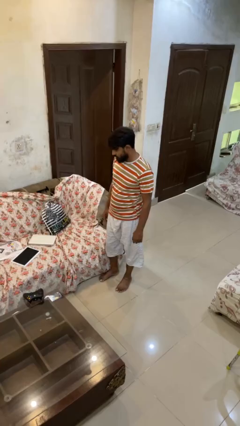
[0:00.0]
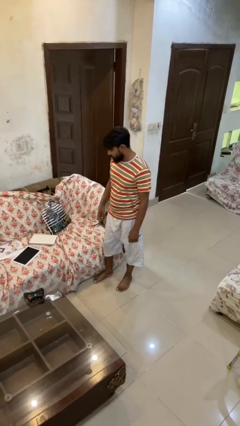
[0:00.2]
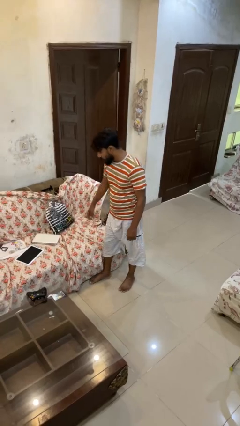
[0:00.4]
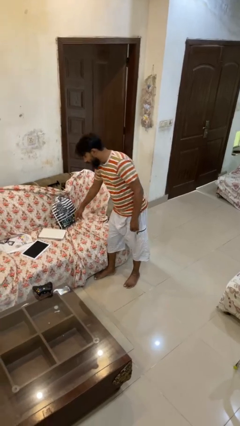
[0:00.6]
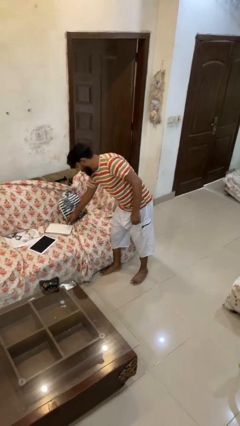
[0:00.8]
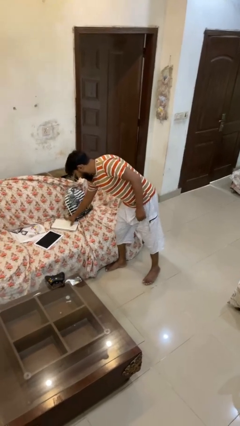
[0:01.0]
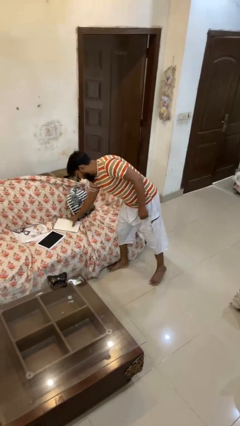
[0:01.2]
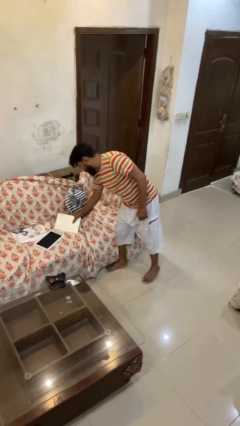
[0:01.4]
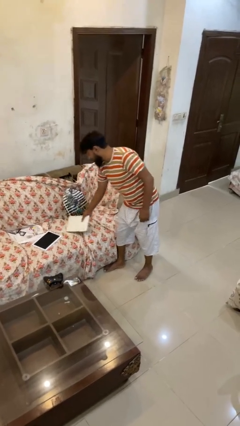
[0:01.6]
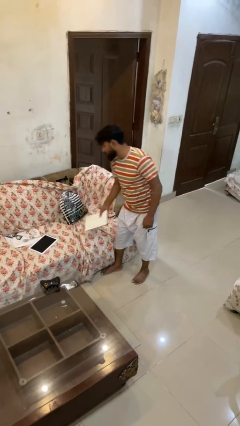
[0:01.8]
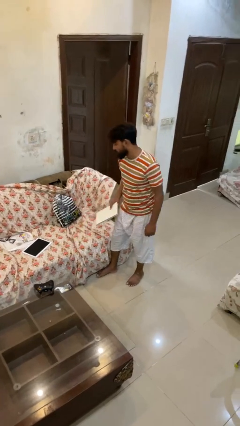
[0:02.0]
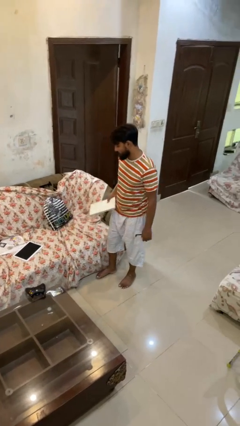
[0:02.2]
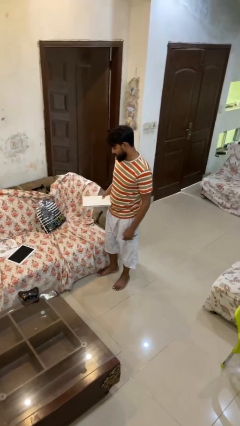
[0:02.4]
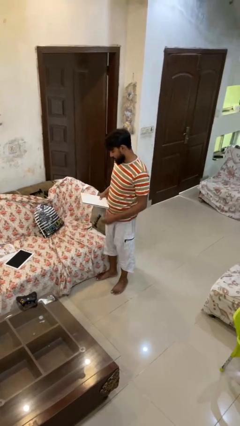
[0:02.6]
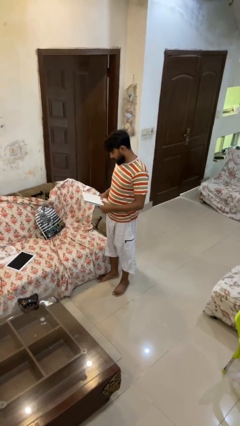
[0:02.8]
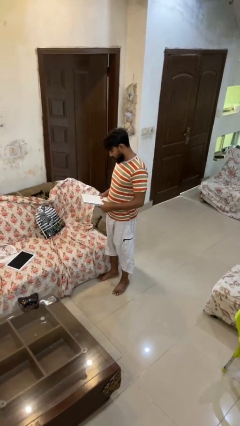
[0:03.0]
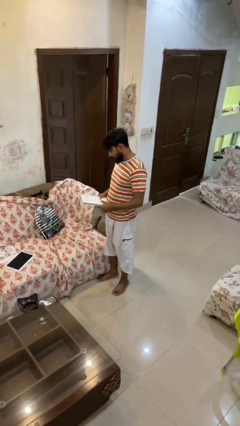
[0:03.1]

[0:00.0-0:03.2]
person picks up object from couch

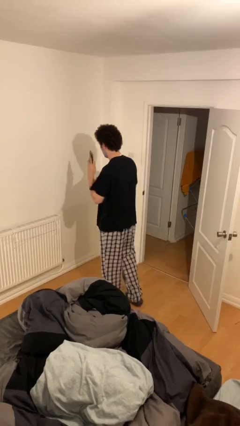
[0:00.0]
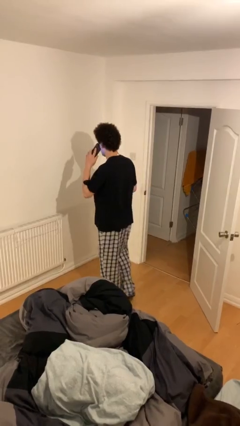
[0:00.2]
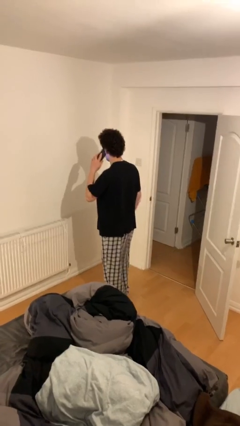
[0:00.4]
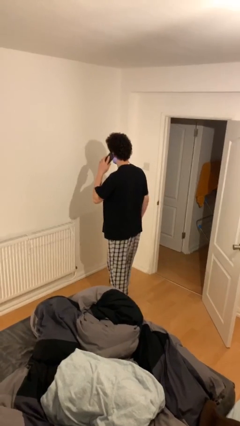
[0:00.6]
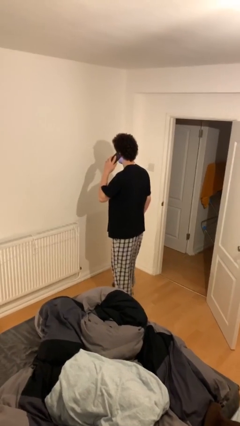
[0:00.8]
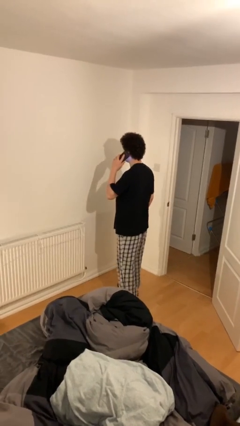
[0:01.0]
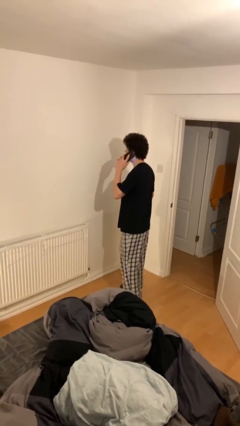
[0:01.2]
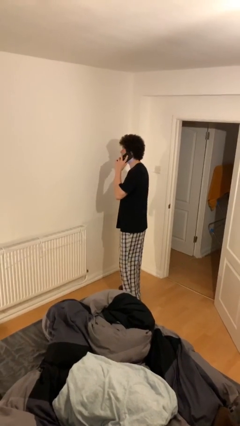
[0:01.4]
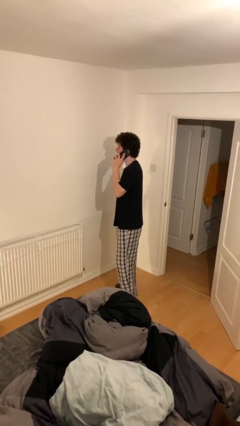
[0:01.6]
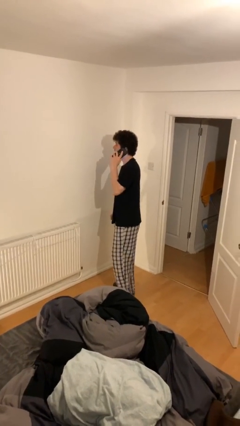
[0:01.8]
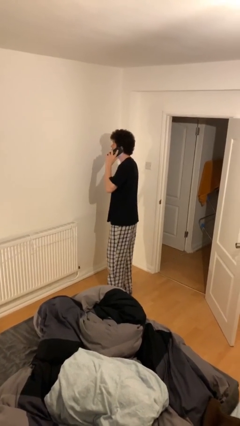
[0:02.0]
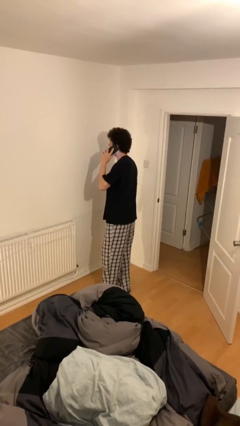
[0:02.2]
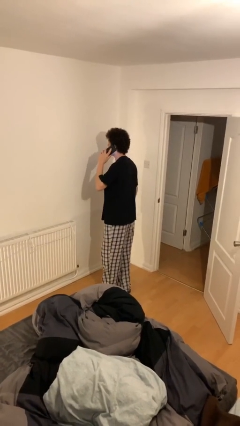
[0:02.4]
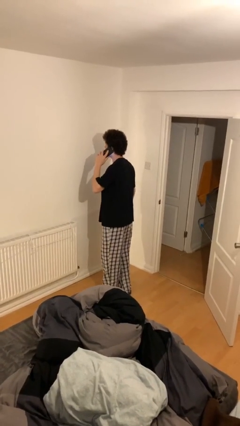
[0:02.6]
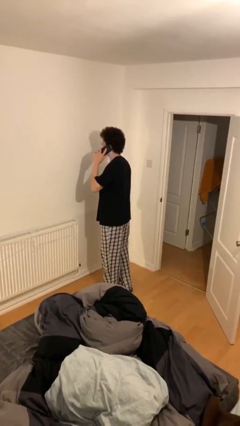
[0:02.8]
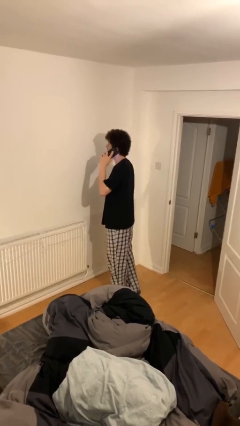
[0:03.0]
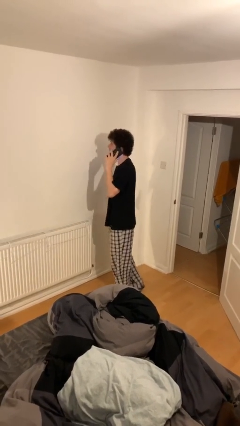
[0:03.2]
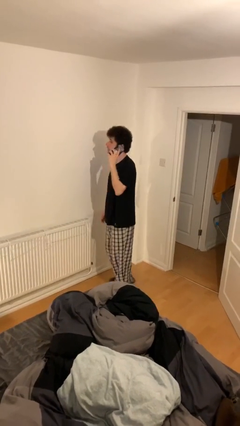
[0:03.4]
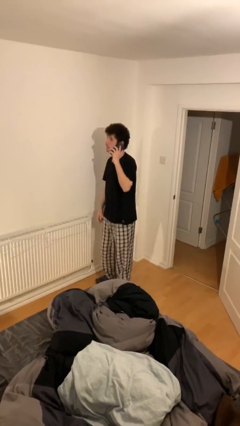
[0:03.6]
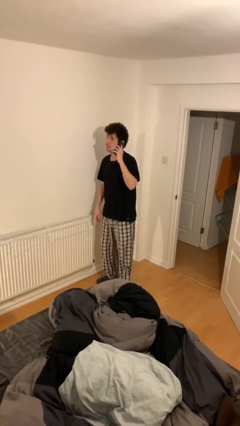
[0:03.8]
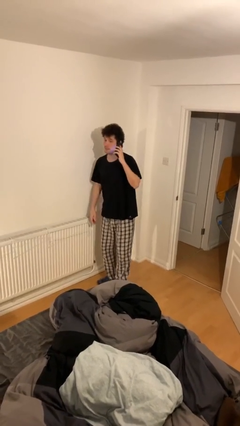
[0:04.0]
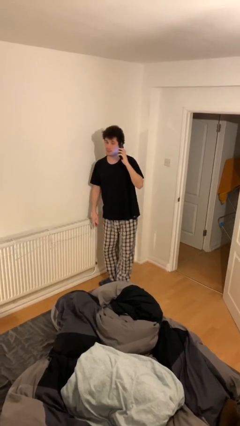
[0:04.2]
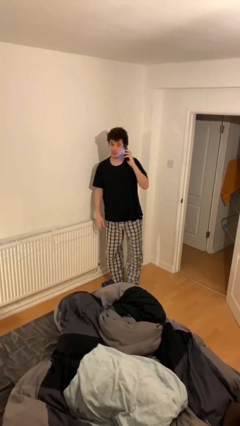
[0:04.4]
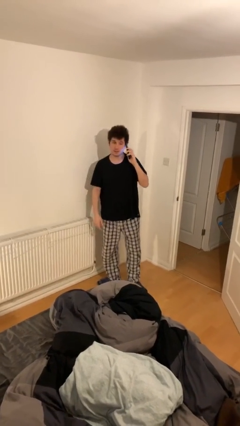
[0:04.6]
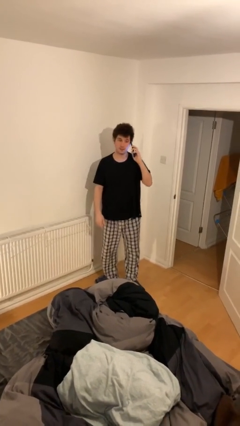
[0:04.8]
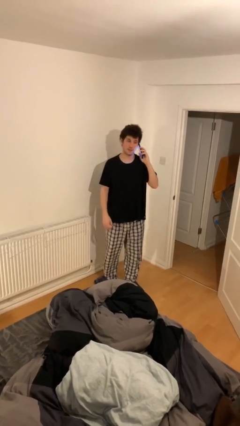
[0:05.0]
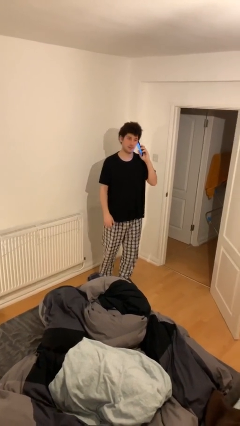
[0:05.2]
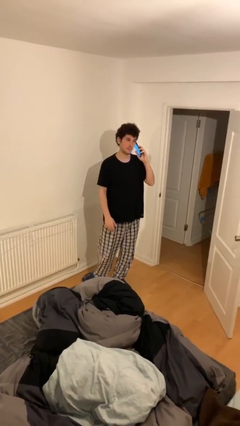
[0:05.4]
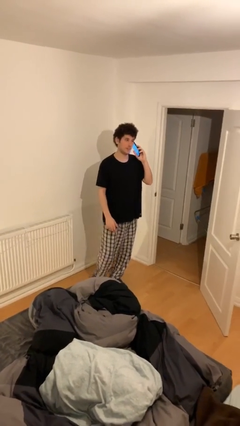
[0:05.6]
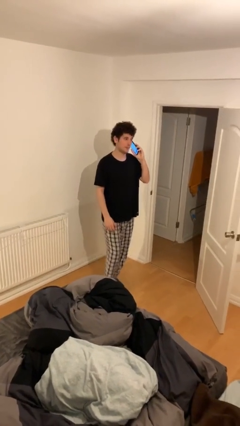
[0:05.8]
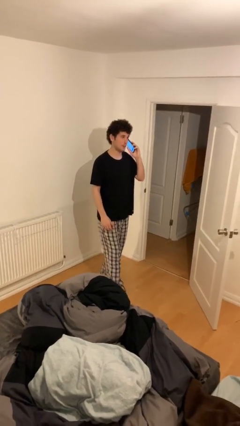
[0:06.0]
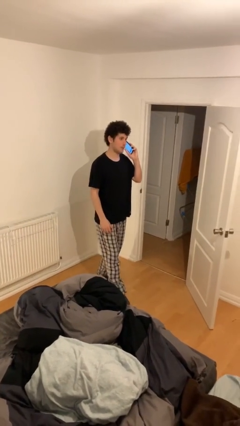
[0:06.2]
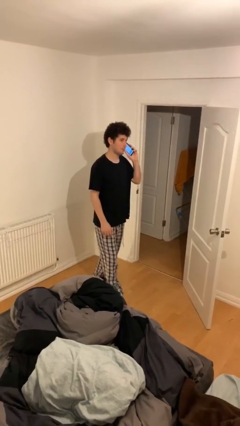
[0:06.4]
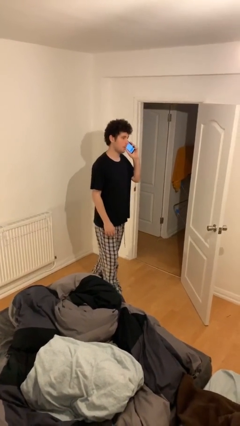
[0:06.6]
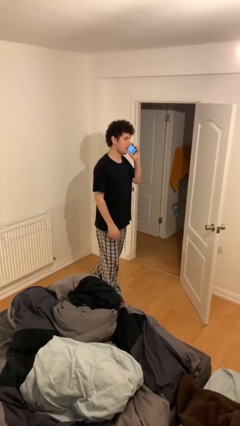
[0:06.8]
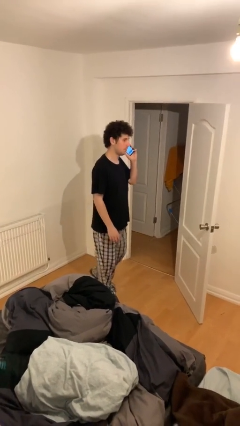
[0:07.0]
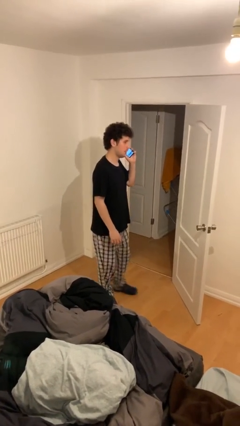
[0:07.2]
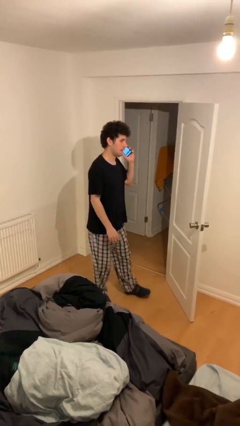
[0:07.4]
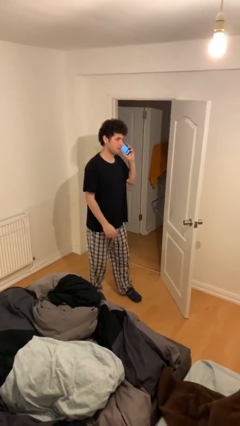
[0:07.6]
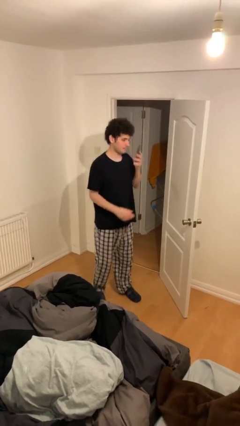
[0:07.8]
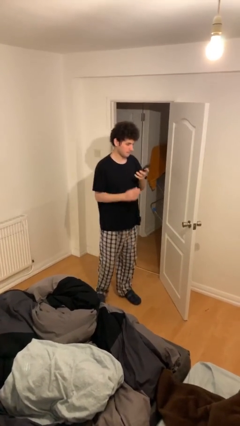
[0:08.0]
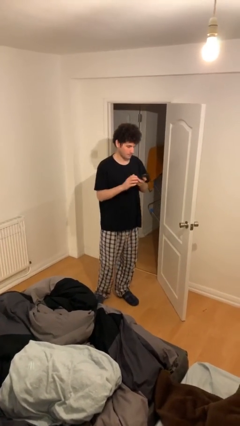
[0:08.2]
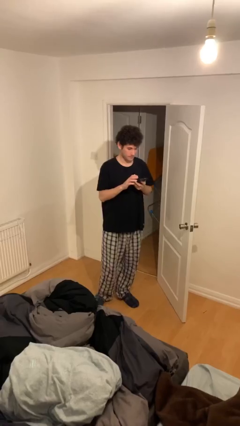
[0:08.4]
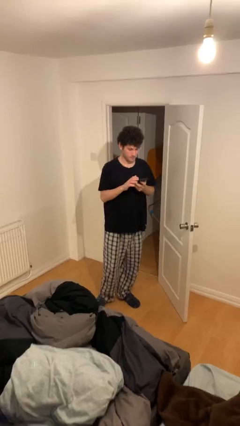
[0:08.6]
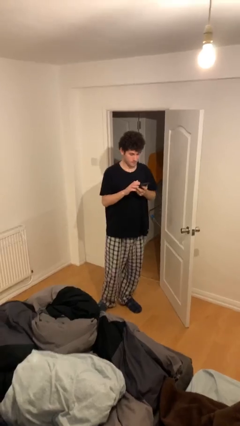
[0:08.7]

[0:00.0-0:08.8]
person talks on phone

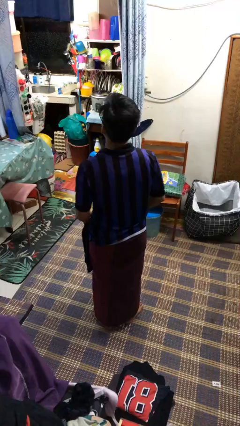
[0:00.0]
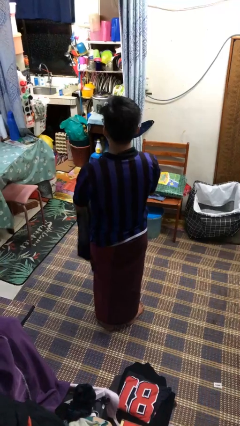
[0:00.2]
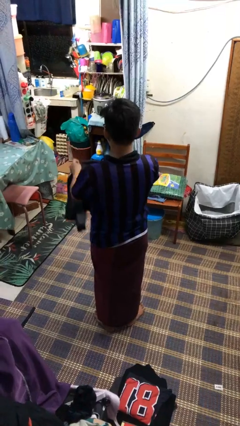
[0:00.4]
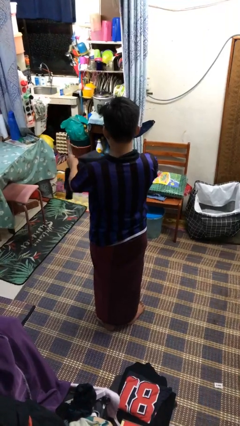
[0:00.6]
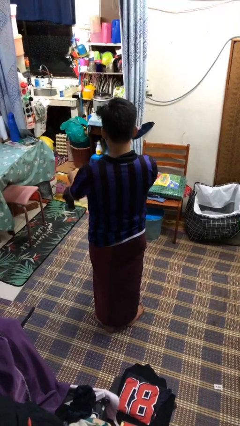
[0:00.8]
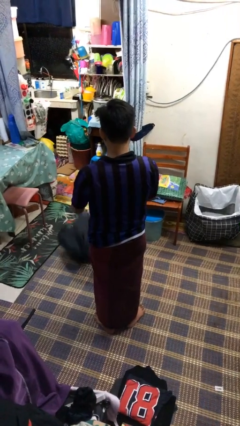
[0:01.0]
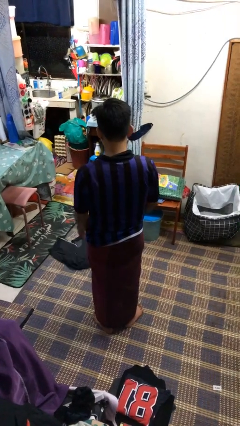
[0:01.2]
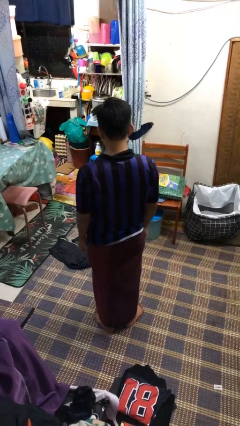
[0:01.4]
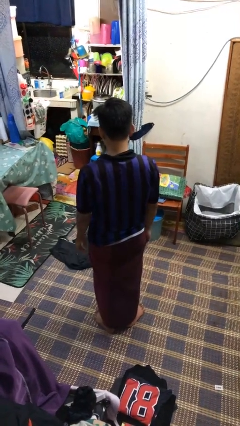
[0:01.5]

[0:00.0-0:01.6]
person throws object to ground

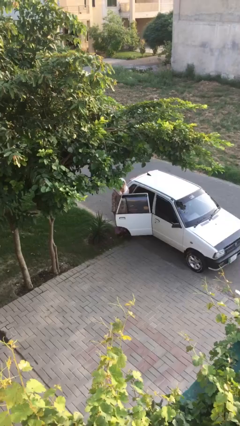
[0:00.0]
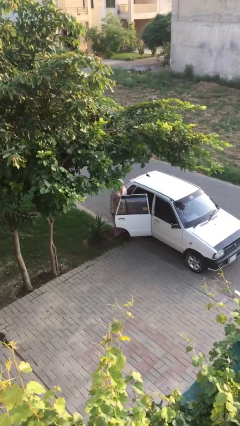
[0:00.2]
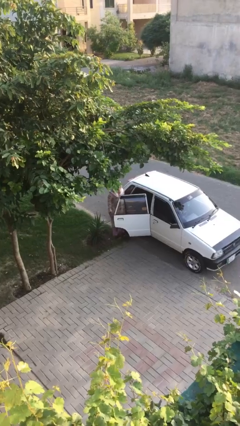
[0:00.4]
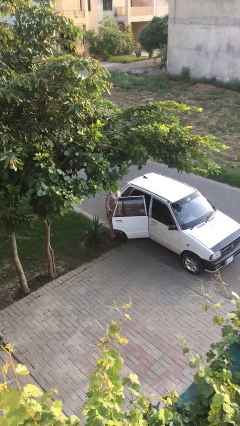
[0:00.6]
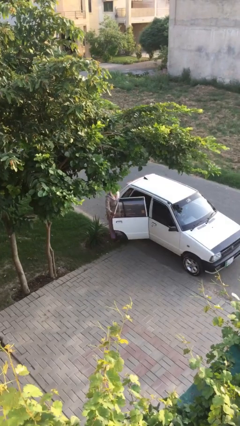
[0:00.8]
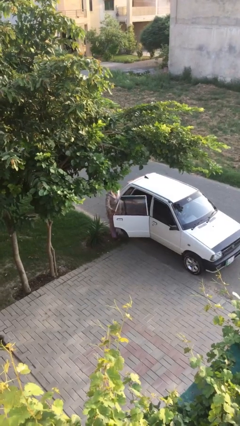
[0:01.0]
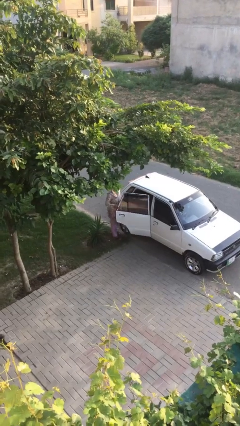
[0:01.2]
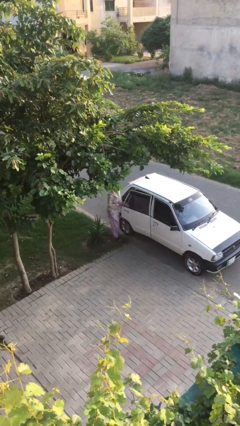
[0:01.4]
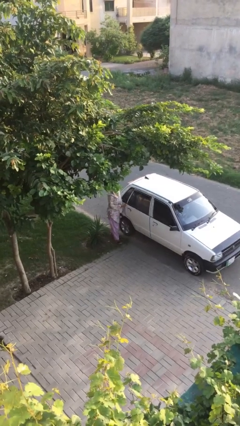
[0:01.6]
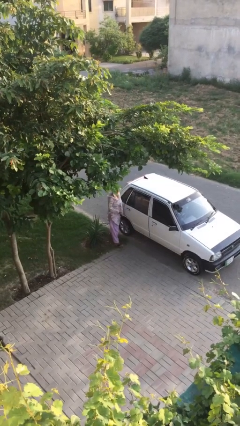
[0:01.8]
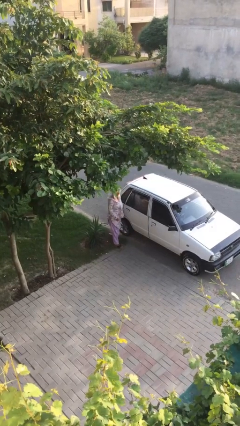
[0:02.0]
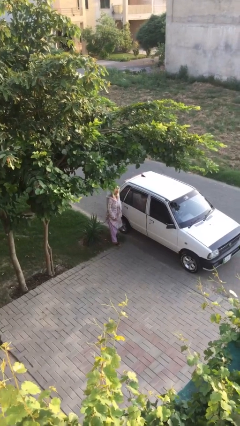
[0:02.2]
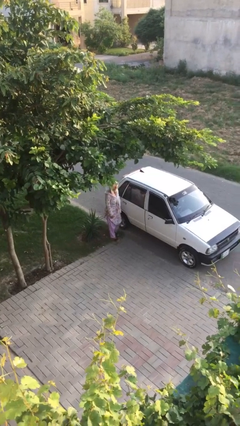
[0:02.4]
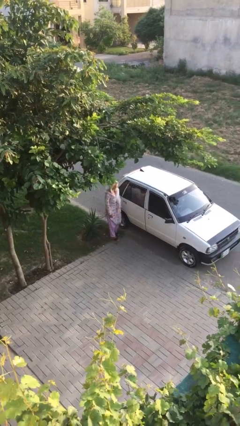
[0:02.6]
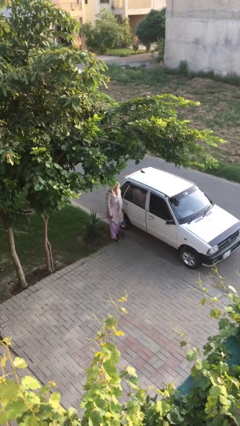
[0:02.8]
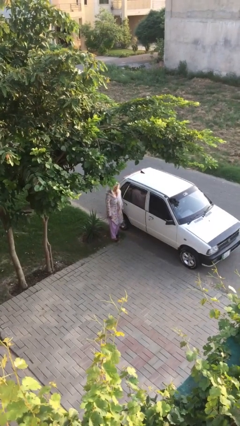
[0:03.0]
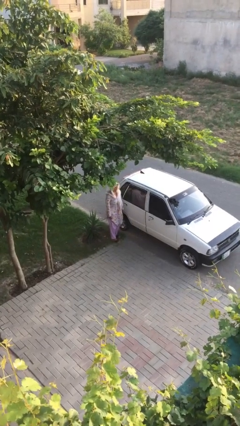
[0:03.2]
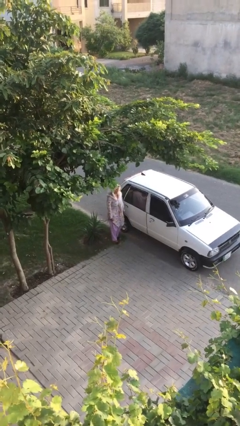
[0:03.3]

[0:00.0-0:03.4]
person closes car door

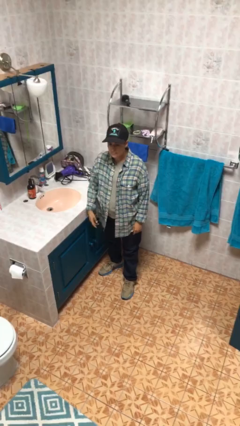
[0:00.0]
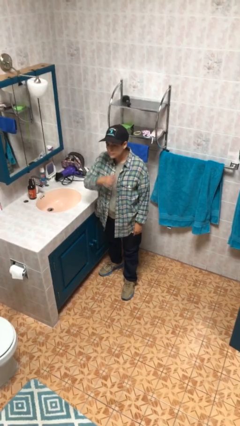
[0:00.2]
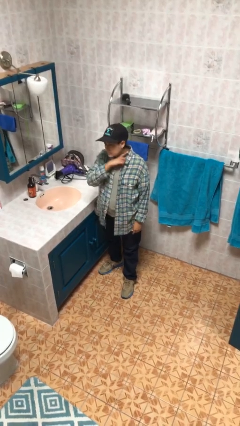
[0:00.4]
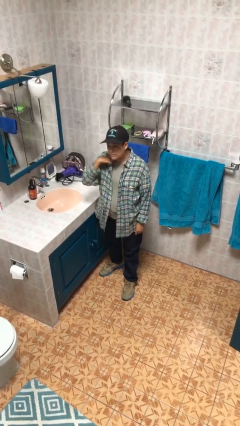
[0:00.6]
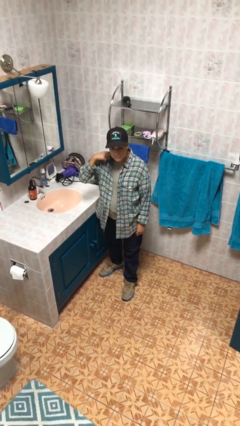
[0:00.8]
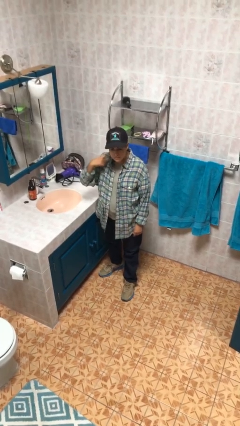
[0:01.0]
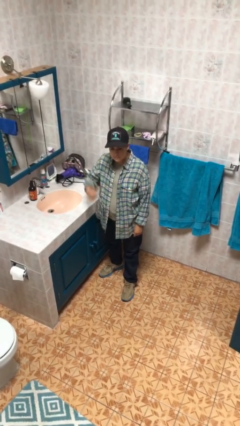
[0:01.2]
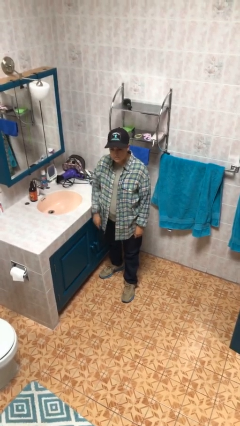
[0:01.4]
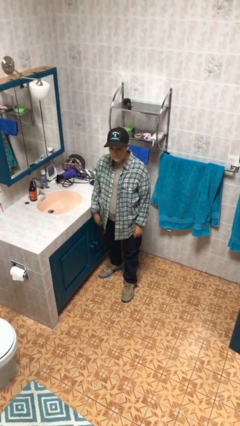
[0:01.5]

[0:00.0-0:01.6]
person gestures cut
